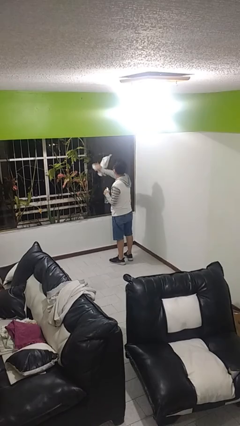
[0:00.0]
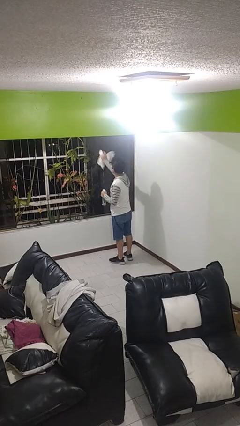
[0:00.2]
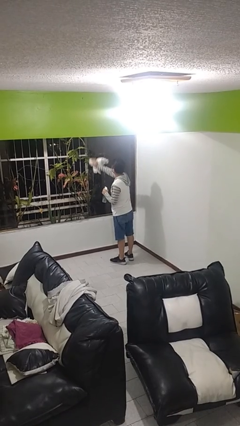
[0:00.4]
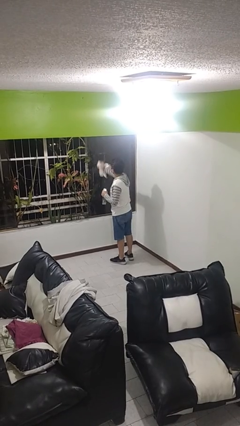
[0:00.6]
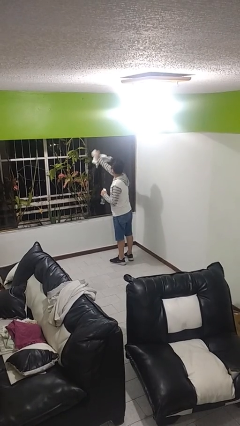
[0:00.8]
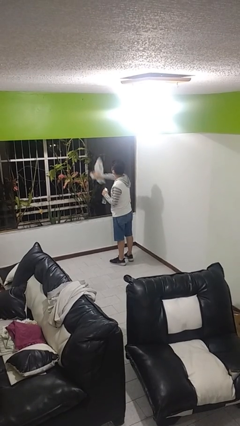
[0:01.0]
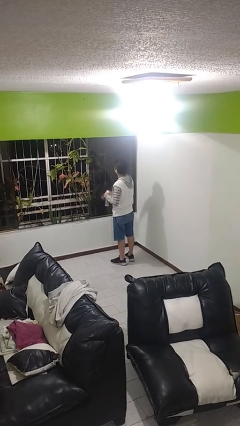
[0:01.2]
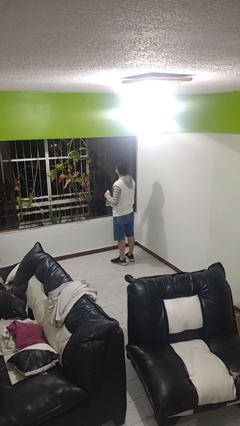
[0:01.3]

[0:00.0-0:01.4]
person washes window

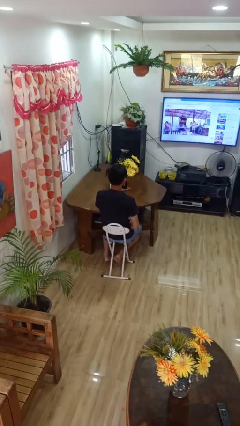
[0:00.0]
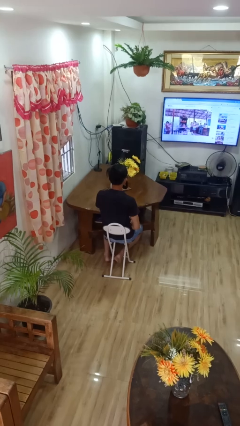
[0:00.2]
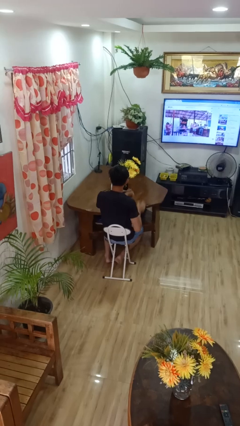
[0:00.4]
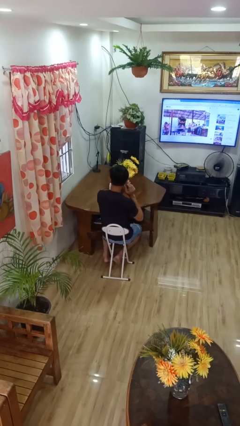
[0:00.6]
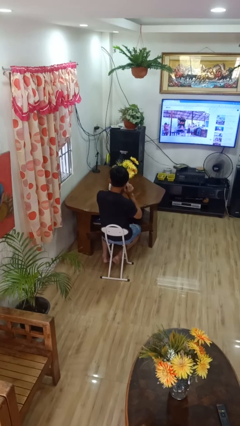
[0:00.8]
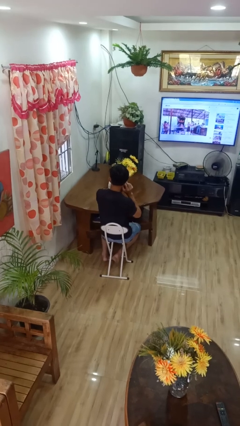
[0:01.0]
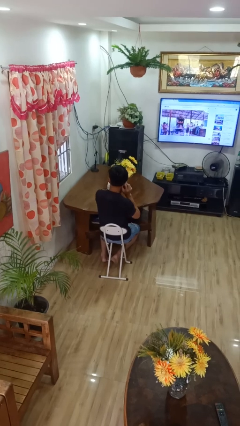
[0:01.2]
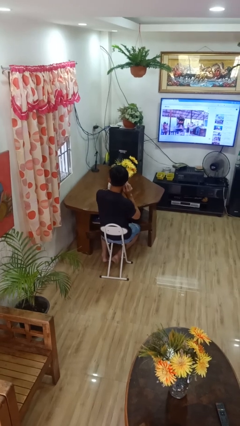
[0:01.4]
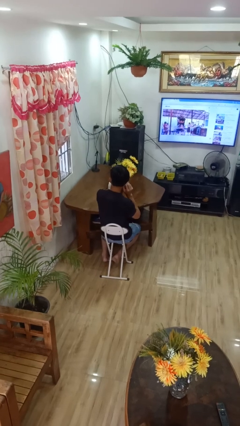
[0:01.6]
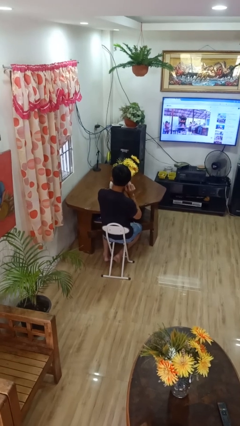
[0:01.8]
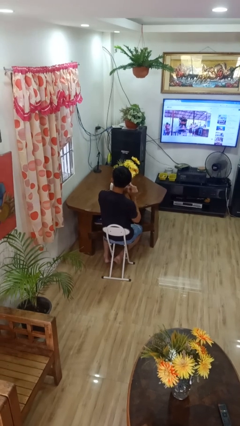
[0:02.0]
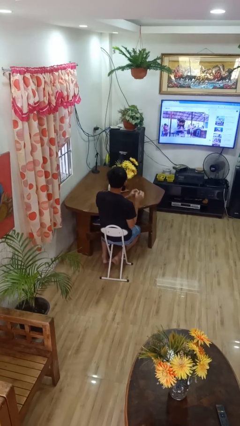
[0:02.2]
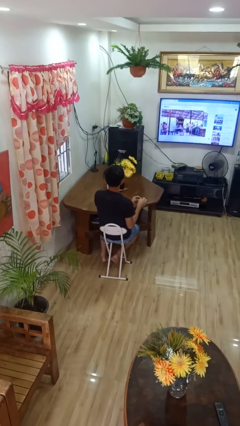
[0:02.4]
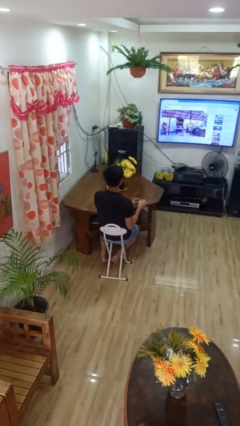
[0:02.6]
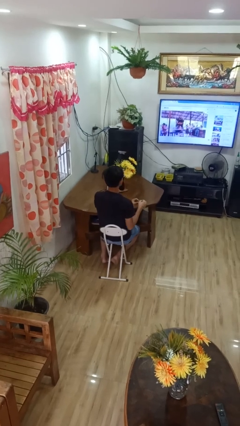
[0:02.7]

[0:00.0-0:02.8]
person takes off earrings

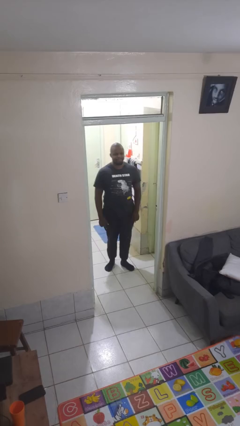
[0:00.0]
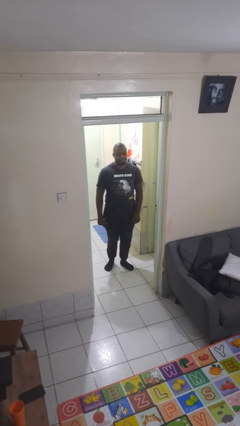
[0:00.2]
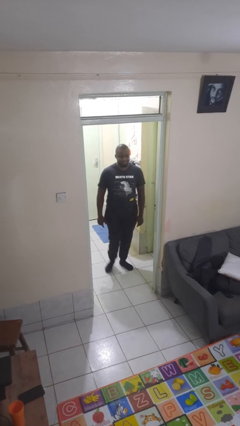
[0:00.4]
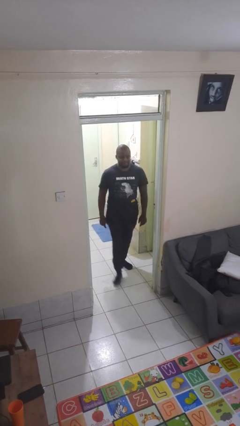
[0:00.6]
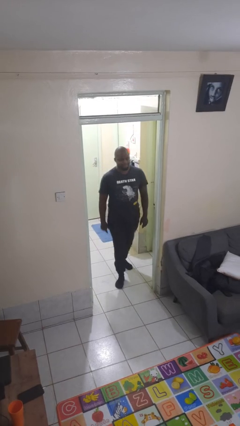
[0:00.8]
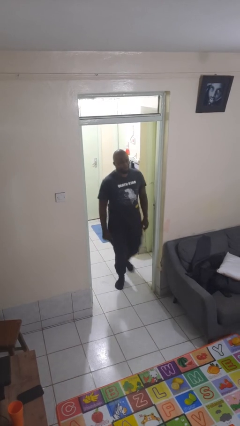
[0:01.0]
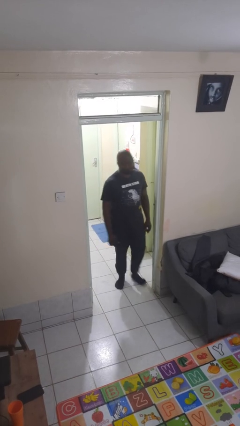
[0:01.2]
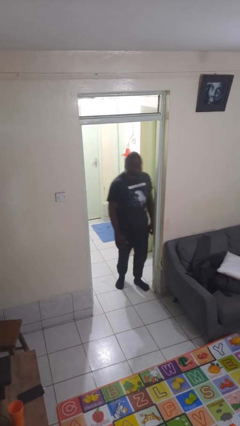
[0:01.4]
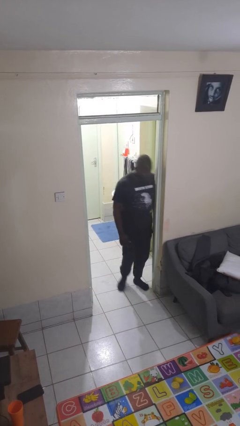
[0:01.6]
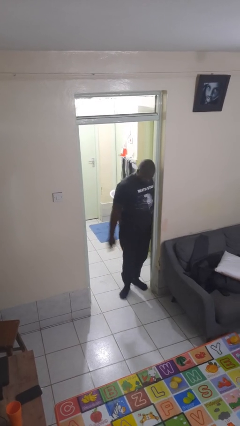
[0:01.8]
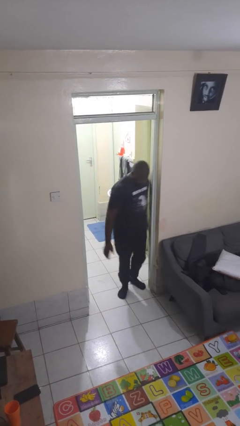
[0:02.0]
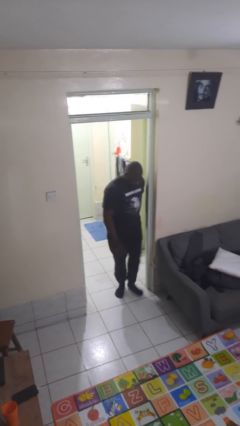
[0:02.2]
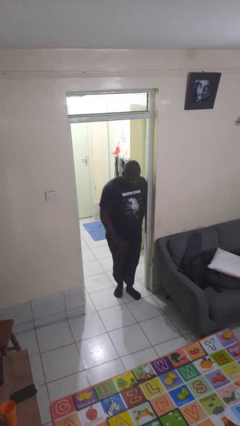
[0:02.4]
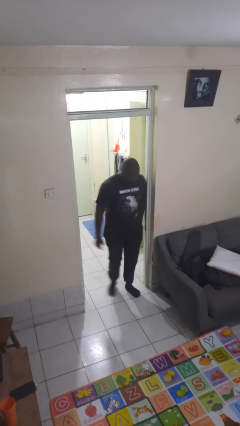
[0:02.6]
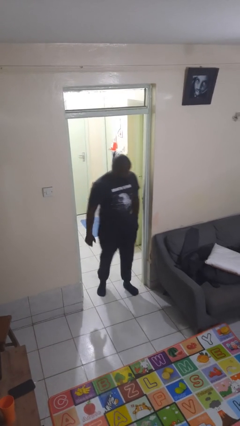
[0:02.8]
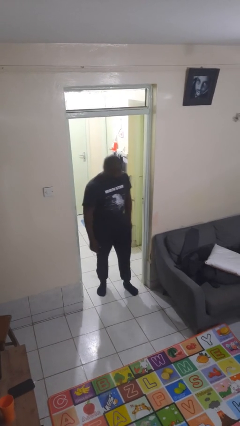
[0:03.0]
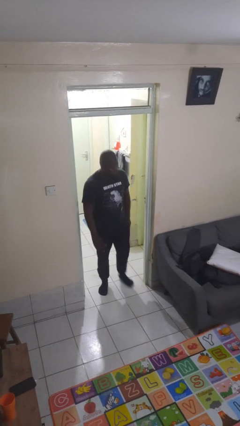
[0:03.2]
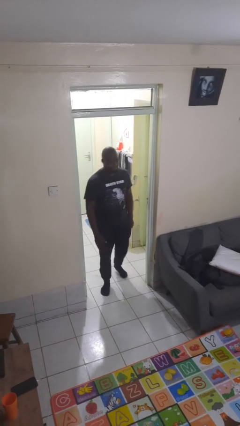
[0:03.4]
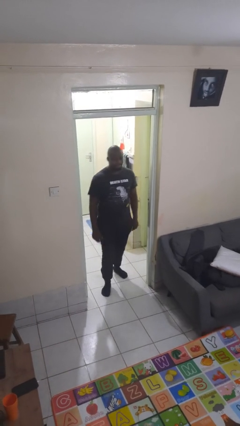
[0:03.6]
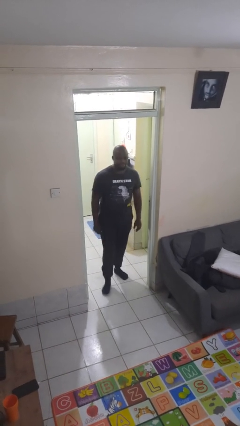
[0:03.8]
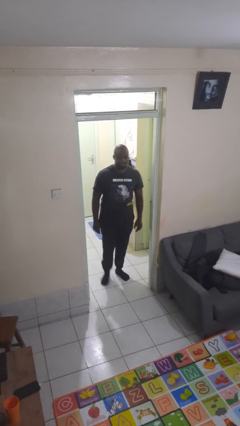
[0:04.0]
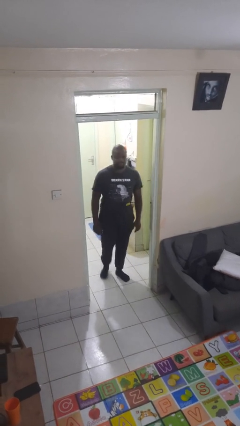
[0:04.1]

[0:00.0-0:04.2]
person bumps into wall

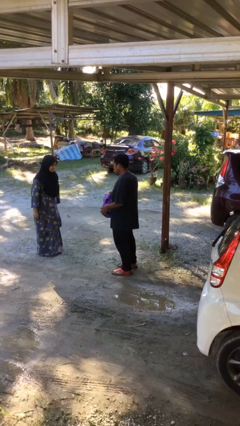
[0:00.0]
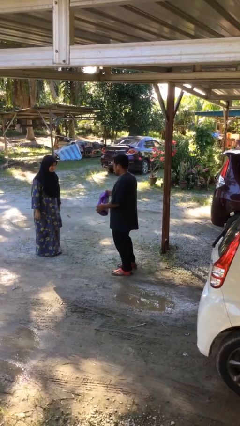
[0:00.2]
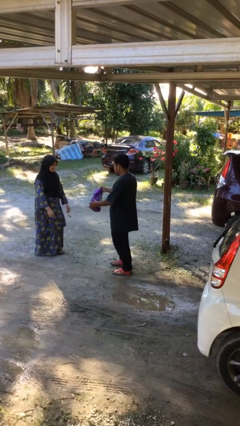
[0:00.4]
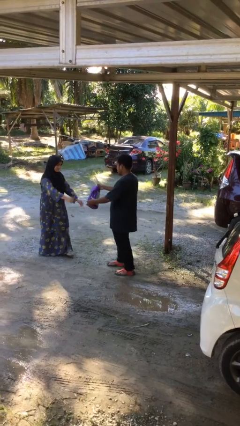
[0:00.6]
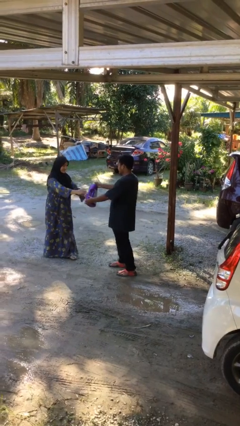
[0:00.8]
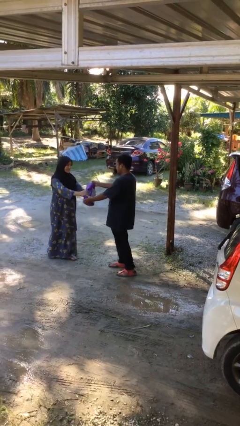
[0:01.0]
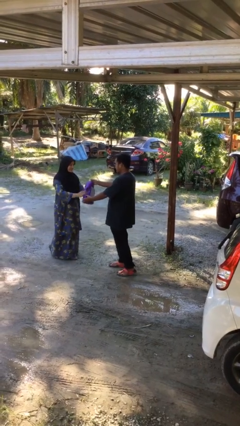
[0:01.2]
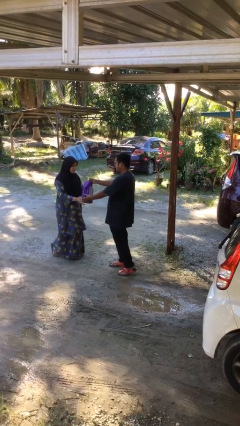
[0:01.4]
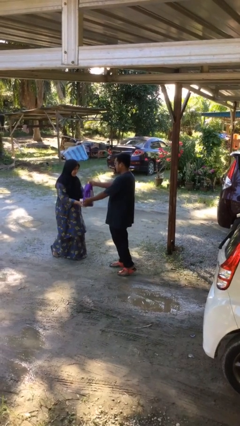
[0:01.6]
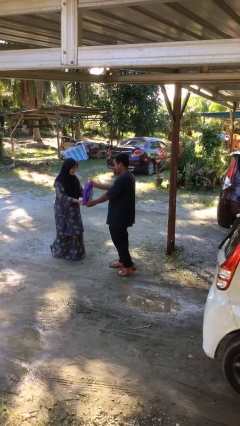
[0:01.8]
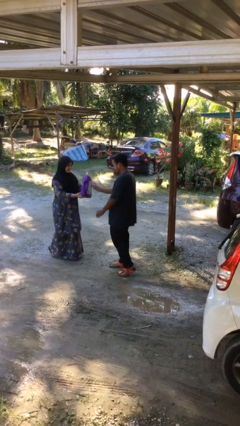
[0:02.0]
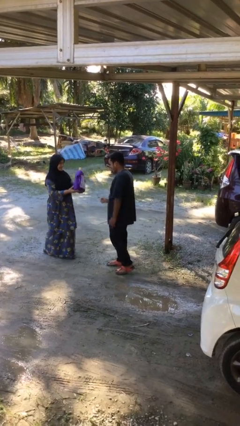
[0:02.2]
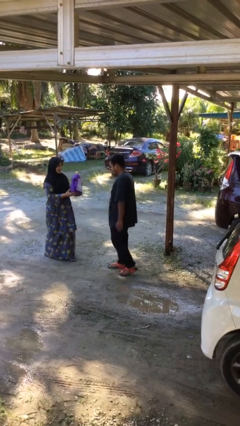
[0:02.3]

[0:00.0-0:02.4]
person transfers object to person

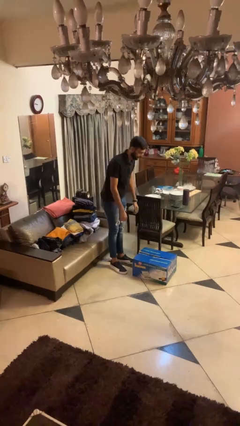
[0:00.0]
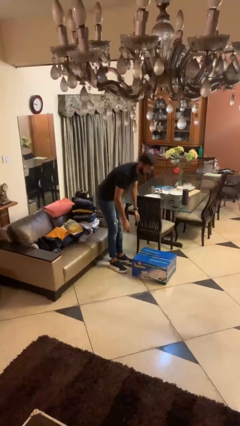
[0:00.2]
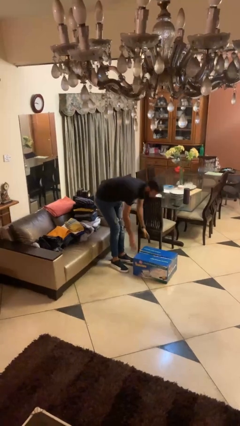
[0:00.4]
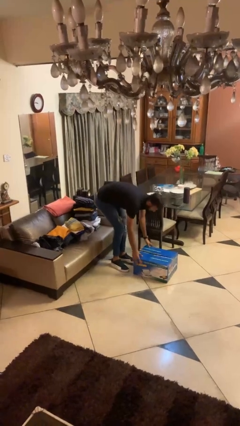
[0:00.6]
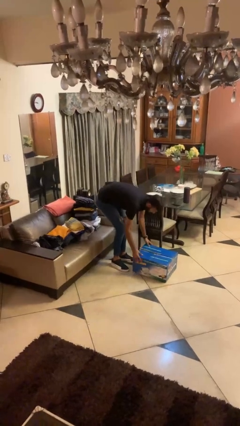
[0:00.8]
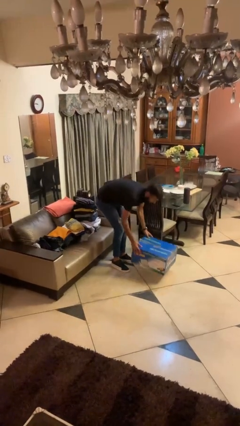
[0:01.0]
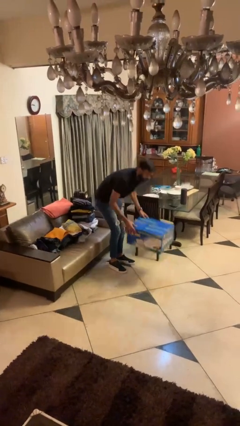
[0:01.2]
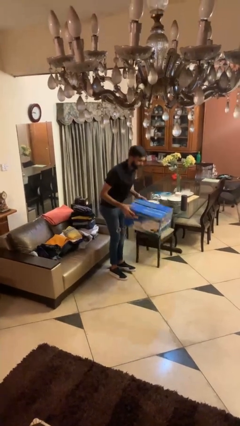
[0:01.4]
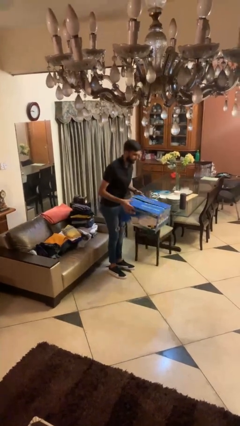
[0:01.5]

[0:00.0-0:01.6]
person picks up object from floor

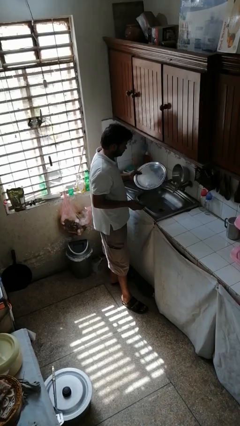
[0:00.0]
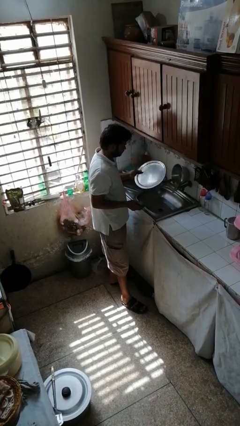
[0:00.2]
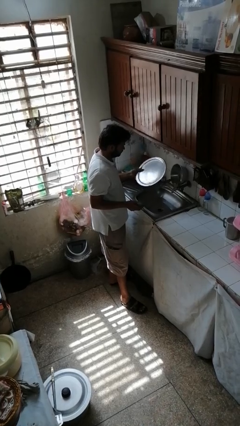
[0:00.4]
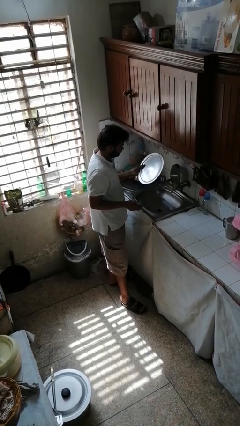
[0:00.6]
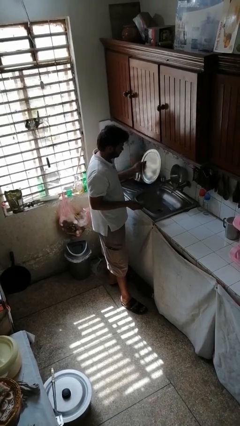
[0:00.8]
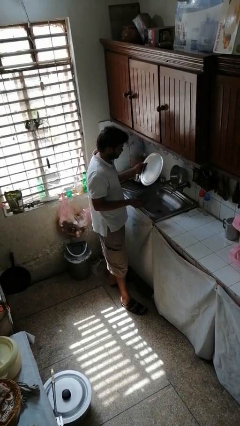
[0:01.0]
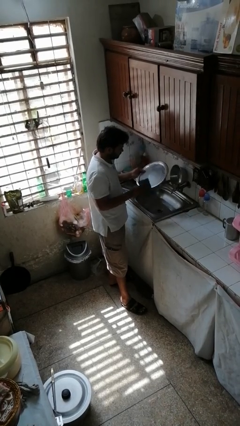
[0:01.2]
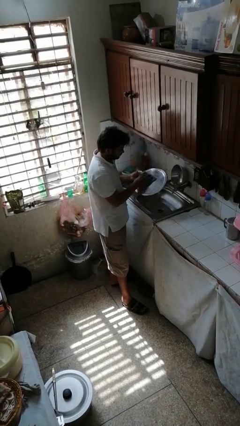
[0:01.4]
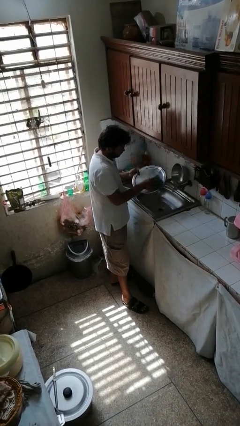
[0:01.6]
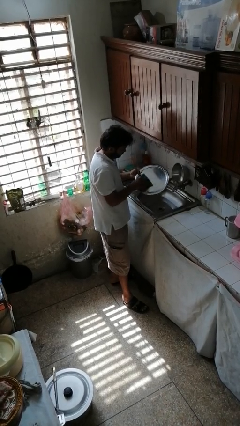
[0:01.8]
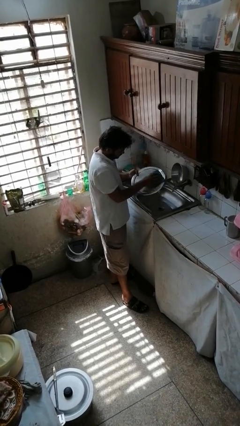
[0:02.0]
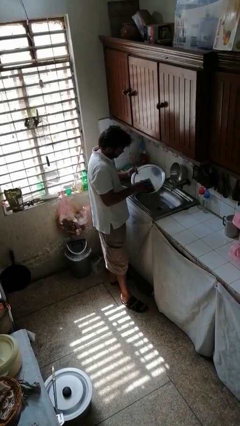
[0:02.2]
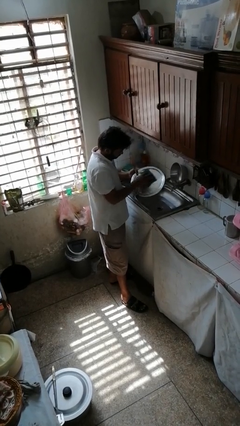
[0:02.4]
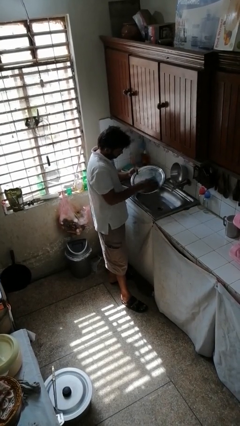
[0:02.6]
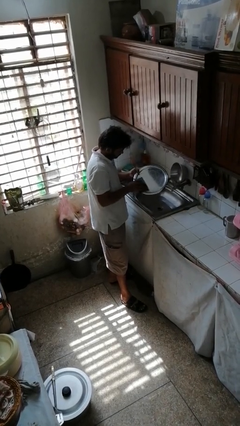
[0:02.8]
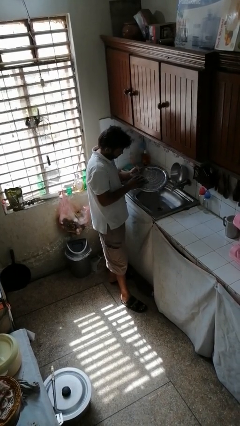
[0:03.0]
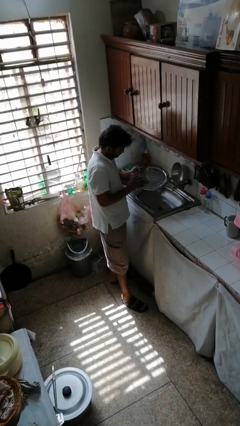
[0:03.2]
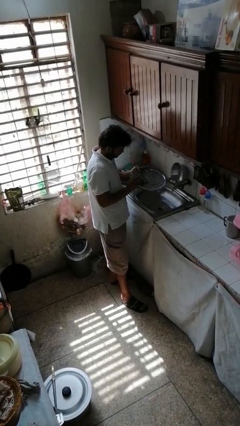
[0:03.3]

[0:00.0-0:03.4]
person washes dish

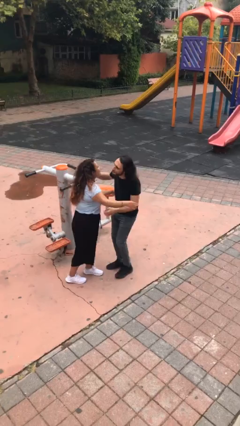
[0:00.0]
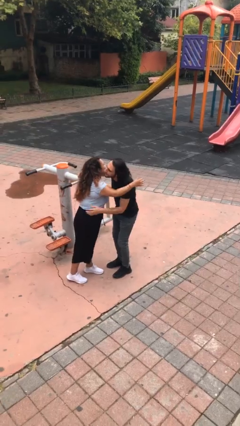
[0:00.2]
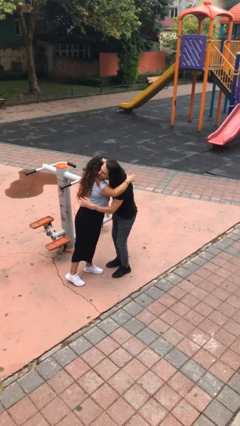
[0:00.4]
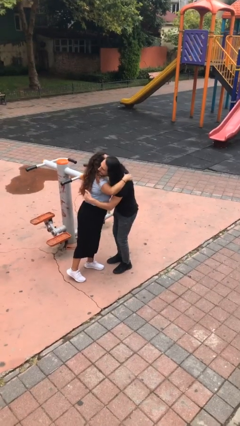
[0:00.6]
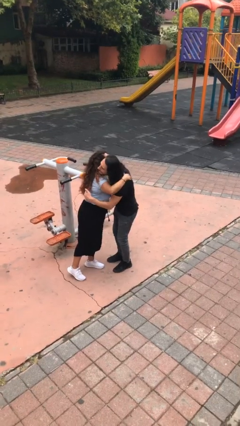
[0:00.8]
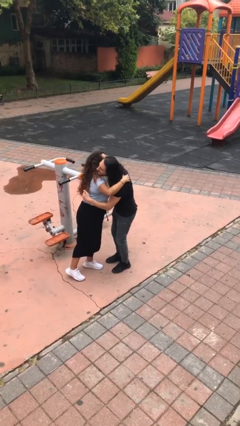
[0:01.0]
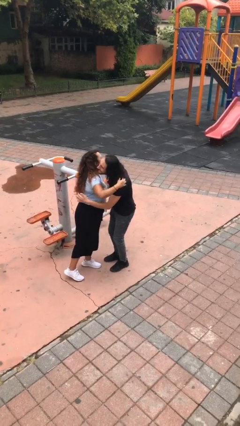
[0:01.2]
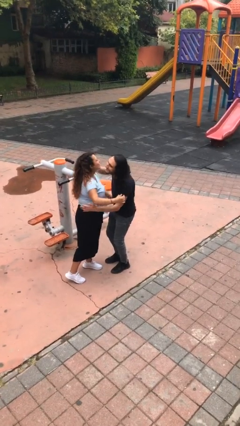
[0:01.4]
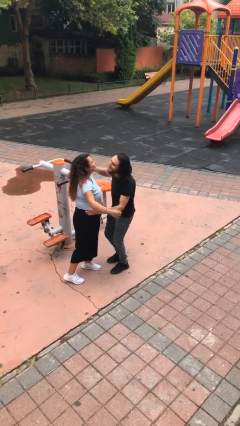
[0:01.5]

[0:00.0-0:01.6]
person embraces person
